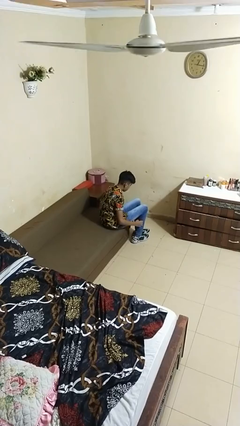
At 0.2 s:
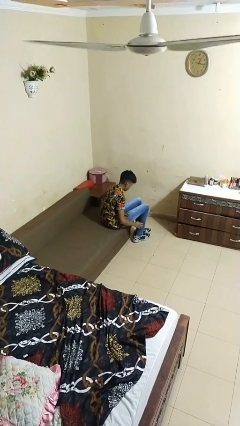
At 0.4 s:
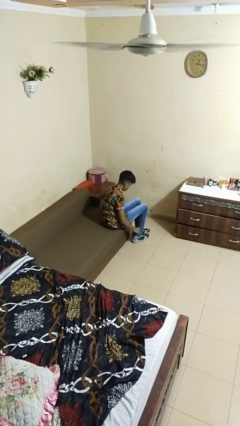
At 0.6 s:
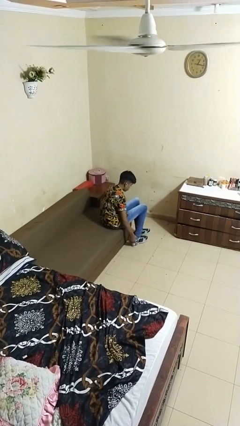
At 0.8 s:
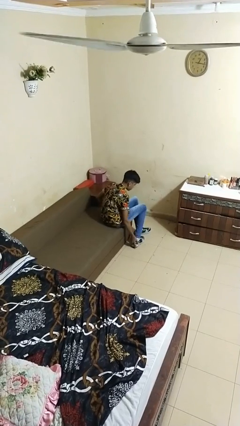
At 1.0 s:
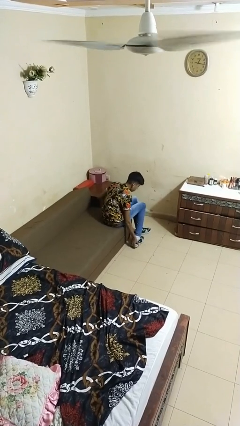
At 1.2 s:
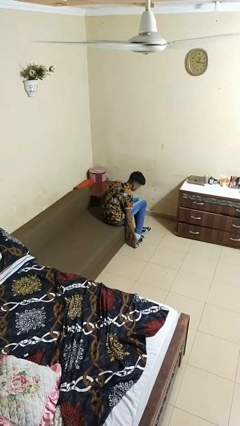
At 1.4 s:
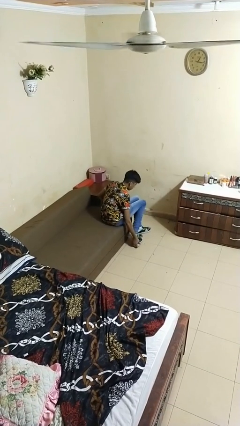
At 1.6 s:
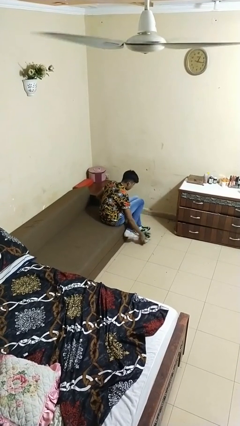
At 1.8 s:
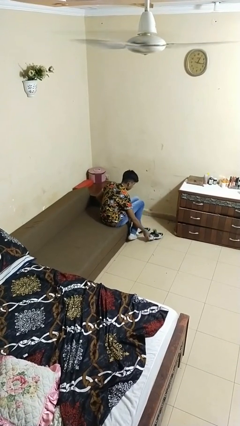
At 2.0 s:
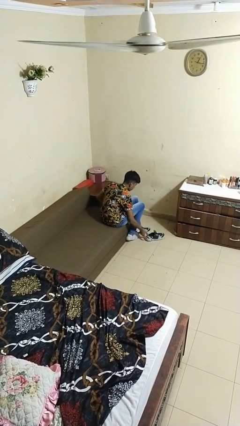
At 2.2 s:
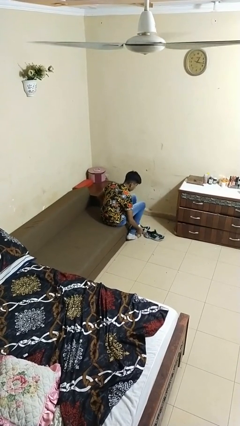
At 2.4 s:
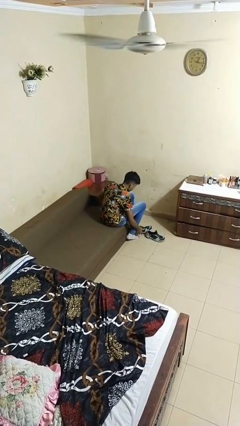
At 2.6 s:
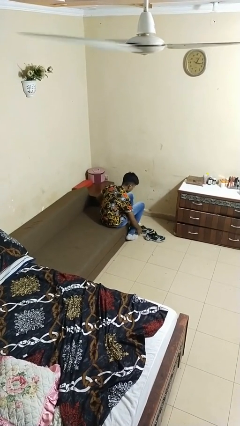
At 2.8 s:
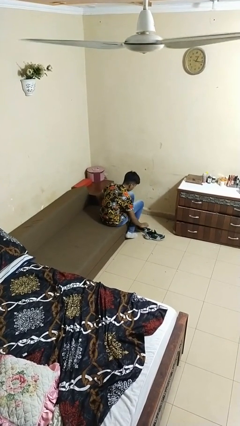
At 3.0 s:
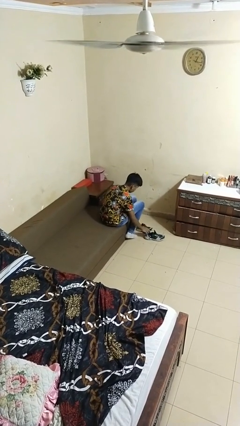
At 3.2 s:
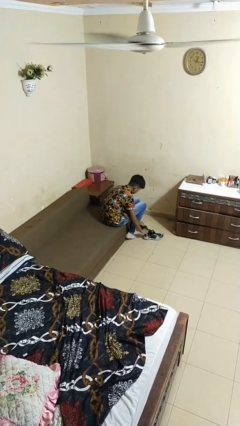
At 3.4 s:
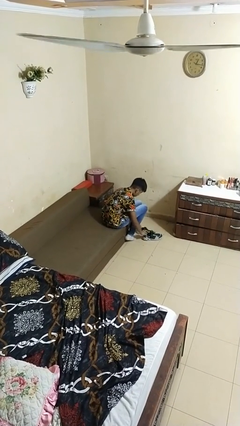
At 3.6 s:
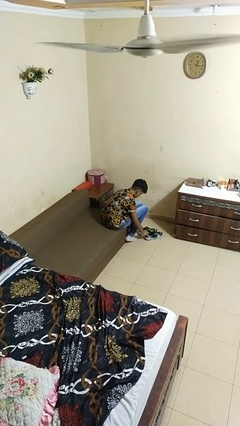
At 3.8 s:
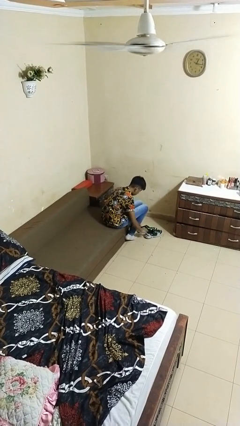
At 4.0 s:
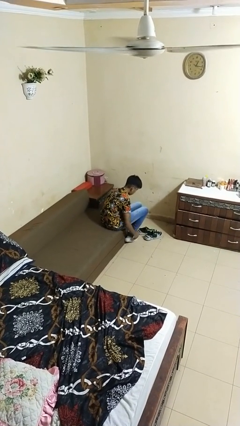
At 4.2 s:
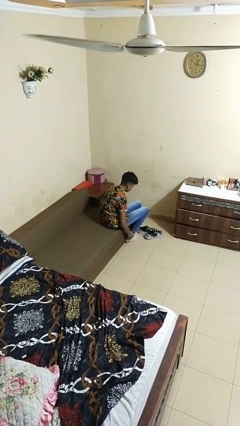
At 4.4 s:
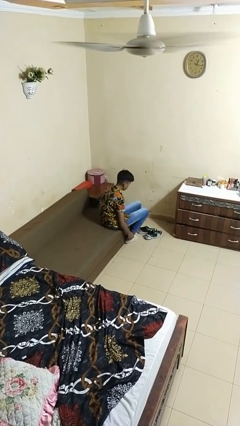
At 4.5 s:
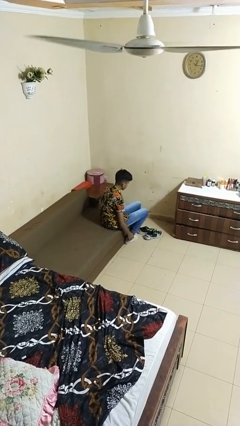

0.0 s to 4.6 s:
person takes off shoes

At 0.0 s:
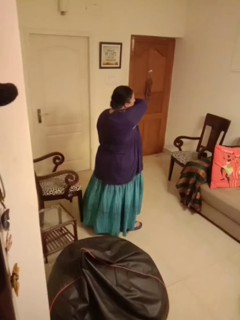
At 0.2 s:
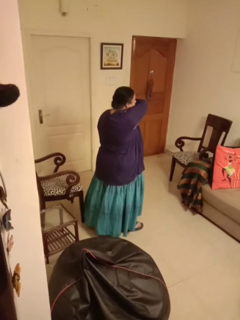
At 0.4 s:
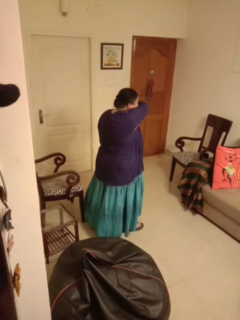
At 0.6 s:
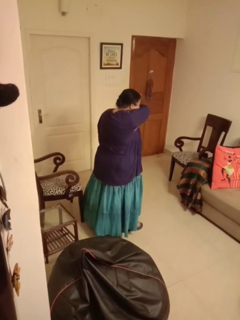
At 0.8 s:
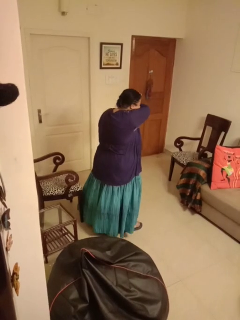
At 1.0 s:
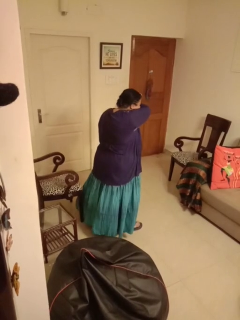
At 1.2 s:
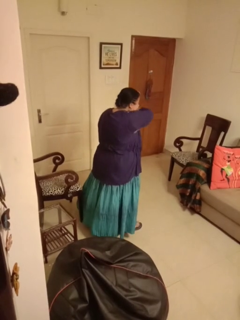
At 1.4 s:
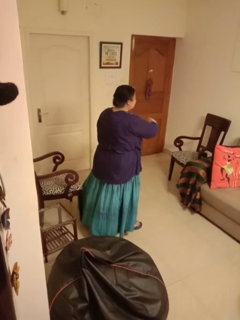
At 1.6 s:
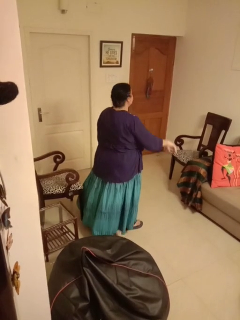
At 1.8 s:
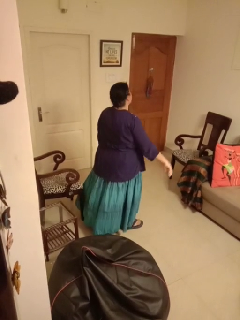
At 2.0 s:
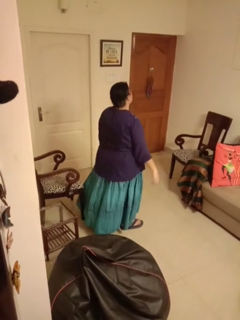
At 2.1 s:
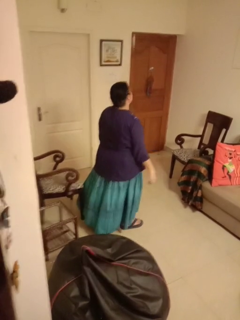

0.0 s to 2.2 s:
person sneezes into arm

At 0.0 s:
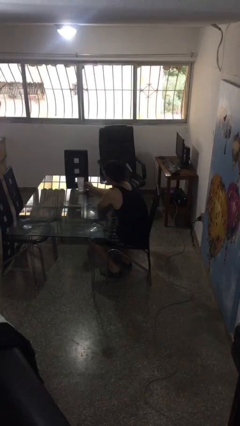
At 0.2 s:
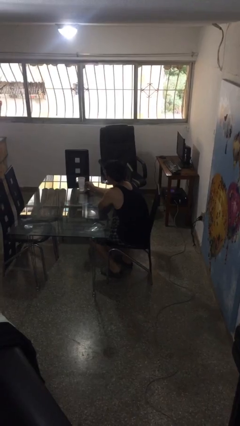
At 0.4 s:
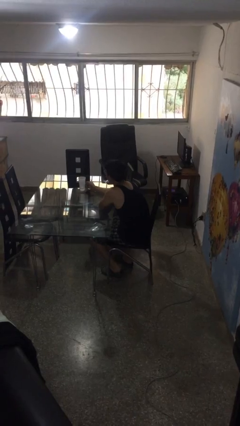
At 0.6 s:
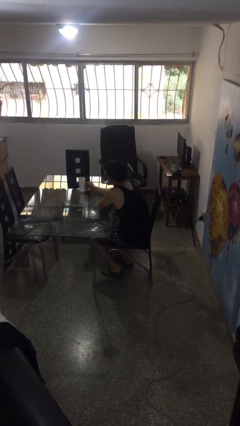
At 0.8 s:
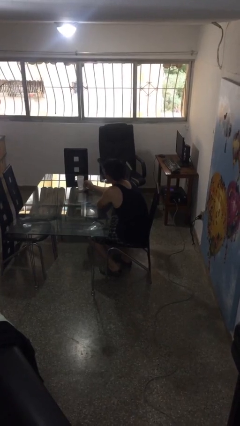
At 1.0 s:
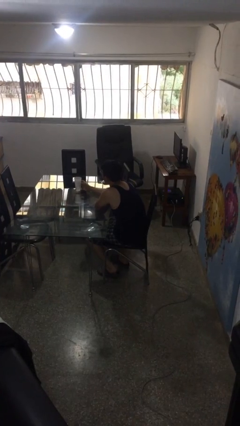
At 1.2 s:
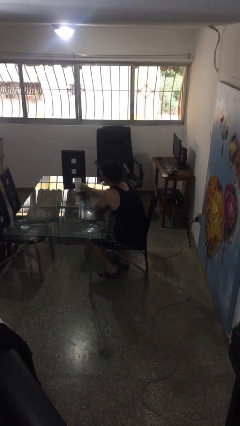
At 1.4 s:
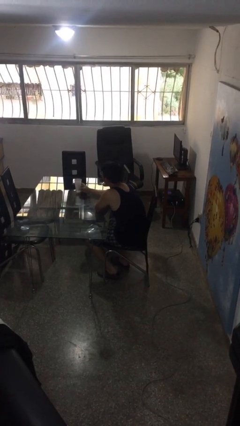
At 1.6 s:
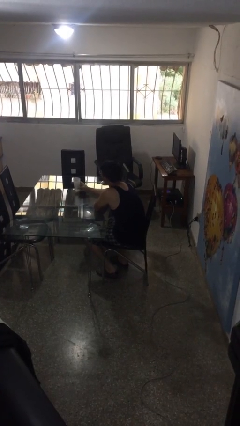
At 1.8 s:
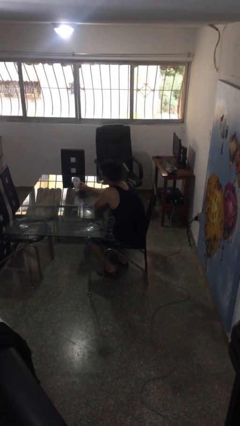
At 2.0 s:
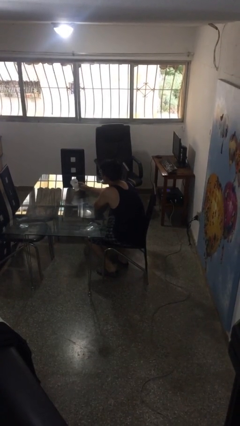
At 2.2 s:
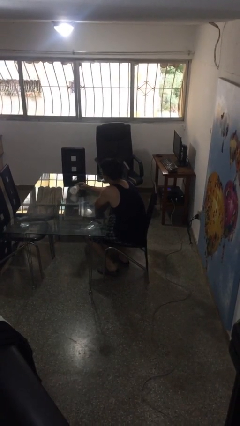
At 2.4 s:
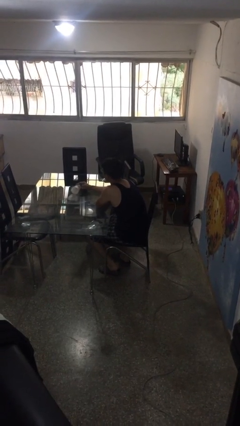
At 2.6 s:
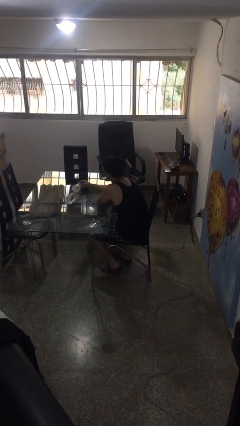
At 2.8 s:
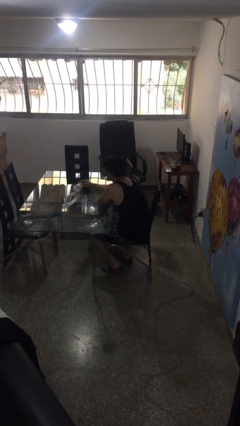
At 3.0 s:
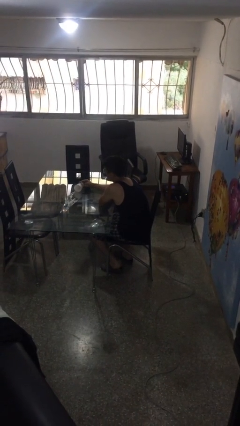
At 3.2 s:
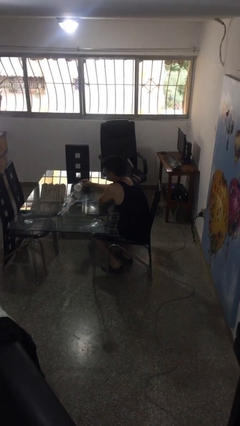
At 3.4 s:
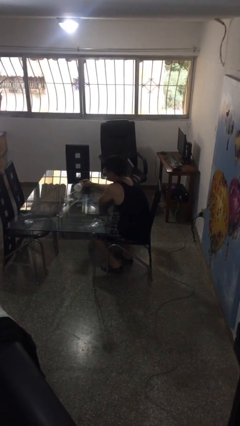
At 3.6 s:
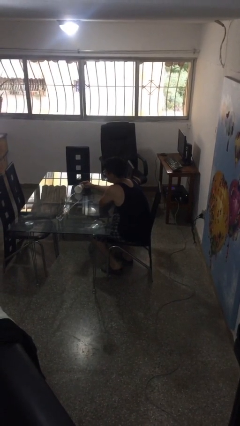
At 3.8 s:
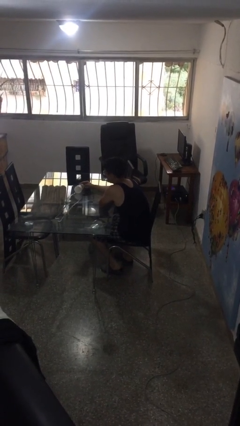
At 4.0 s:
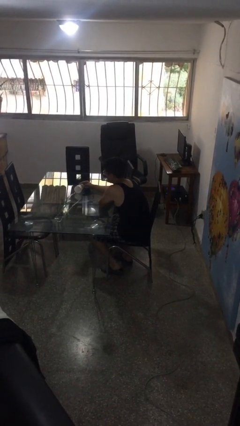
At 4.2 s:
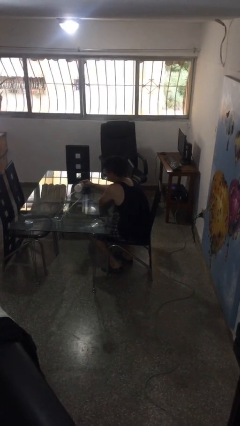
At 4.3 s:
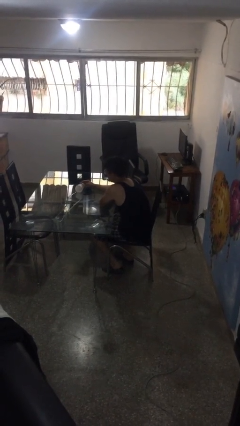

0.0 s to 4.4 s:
person spills on table

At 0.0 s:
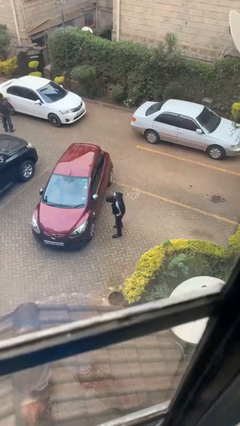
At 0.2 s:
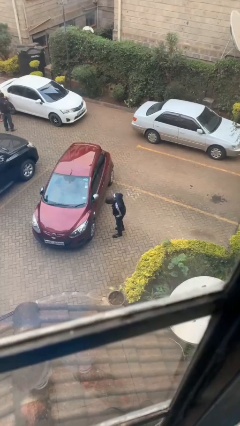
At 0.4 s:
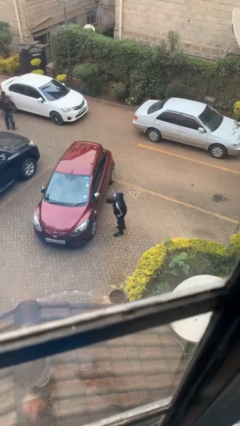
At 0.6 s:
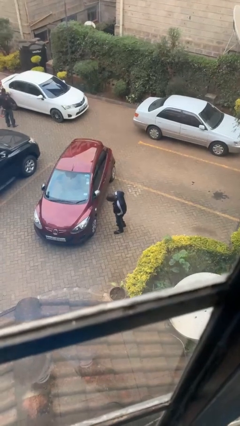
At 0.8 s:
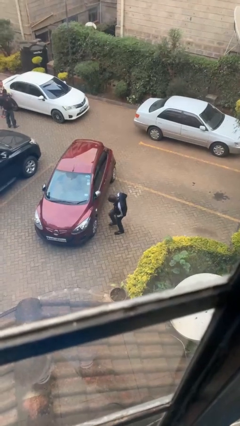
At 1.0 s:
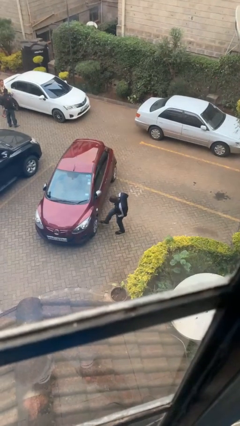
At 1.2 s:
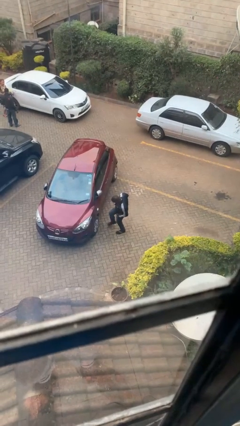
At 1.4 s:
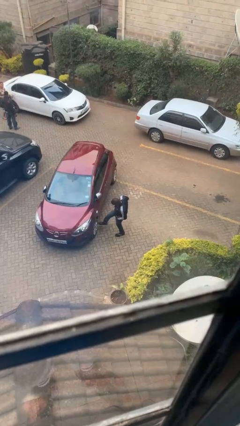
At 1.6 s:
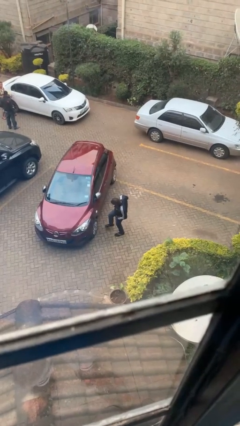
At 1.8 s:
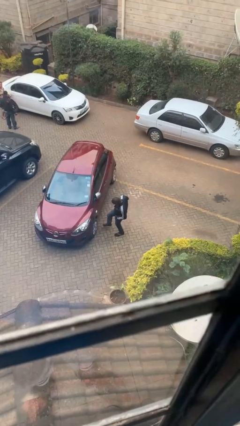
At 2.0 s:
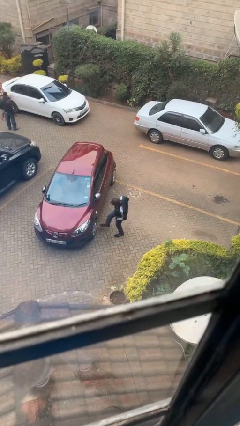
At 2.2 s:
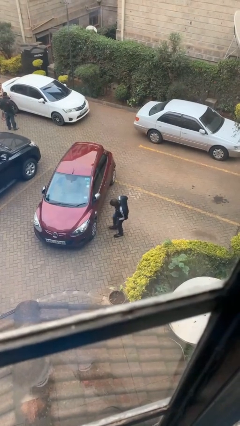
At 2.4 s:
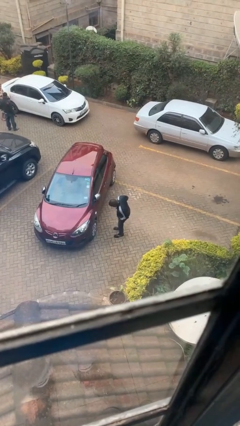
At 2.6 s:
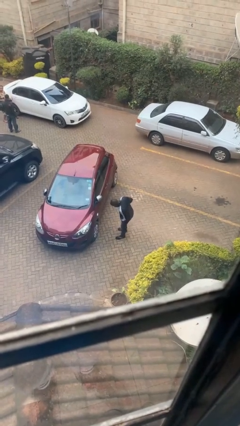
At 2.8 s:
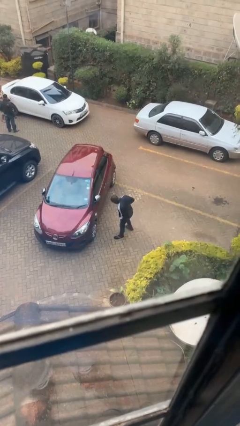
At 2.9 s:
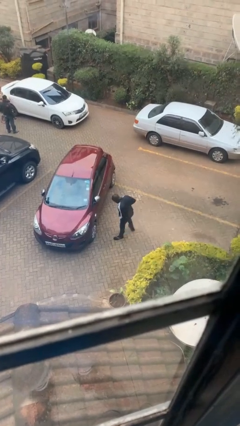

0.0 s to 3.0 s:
person kicks car tires

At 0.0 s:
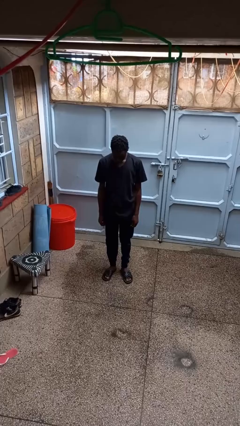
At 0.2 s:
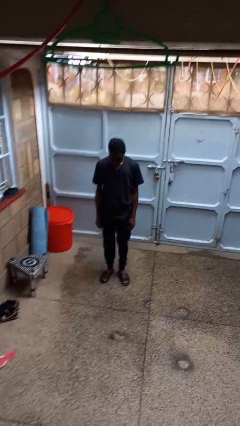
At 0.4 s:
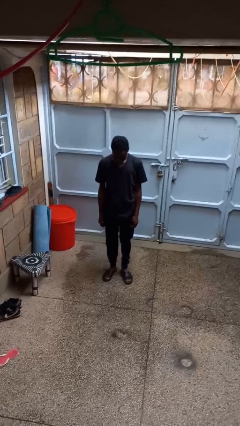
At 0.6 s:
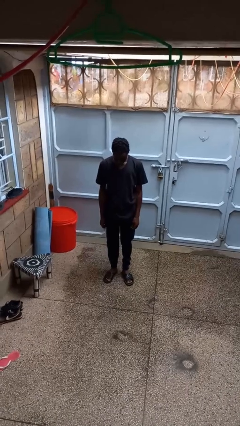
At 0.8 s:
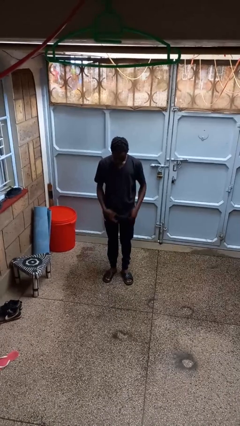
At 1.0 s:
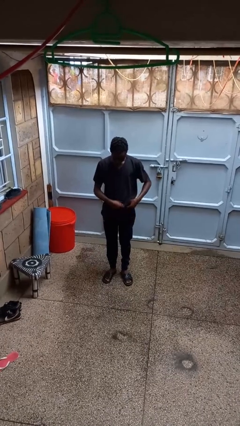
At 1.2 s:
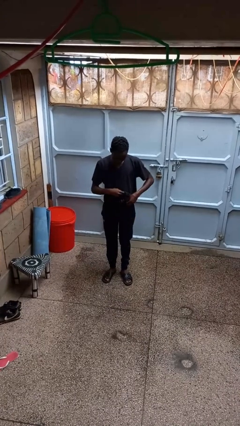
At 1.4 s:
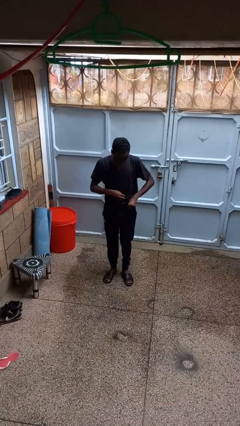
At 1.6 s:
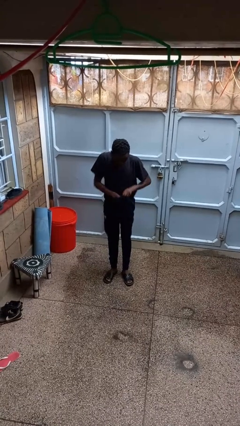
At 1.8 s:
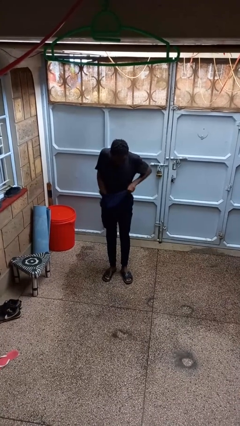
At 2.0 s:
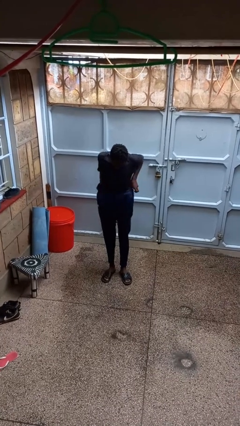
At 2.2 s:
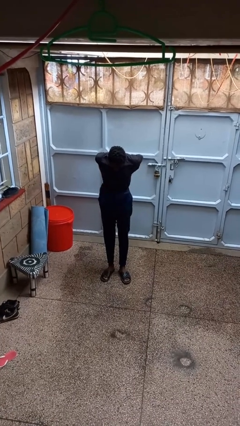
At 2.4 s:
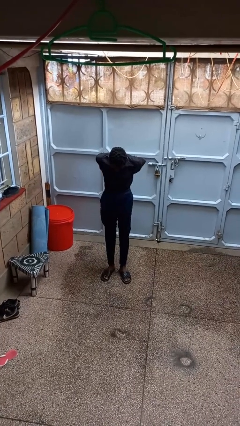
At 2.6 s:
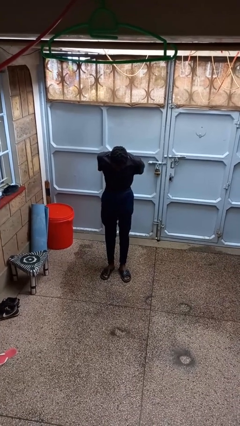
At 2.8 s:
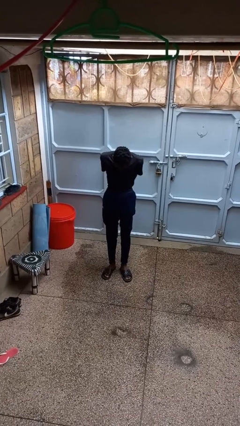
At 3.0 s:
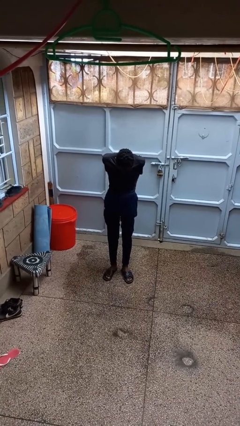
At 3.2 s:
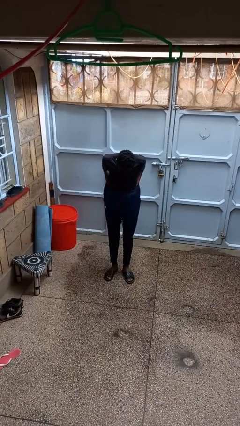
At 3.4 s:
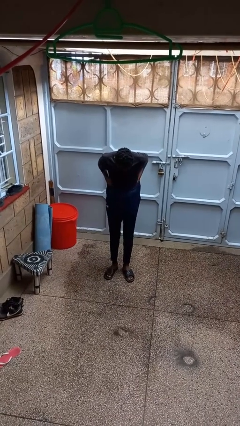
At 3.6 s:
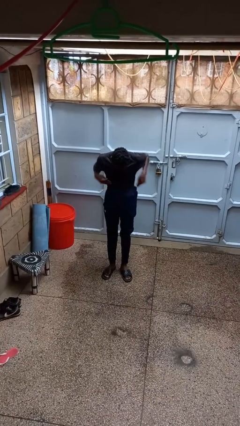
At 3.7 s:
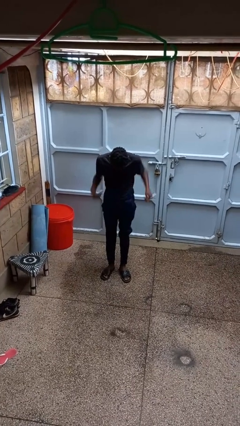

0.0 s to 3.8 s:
person tucks in shirt
